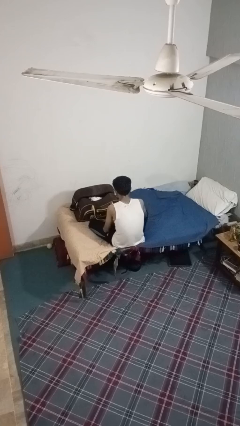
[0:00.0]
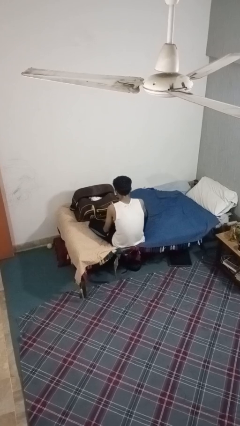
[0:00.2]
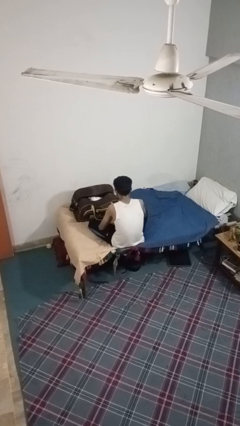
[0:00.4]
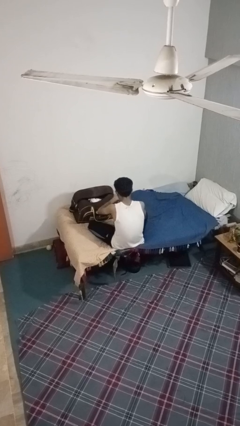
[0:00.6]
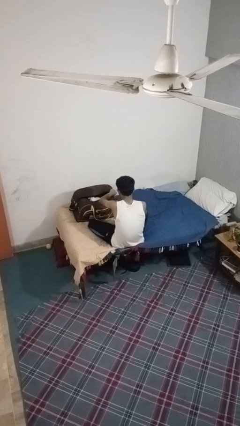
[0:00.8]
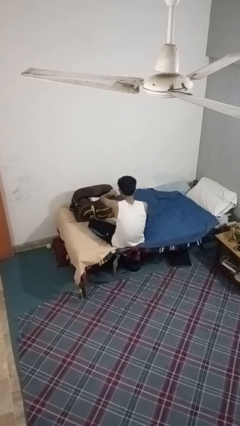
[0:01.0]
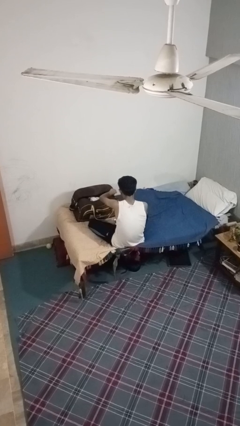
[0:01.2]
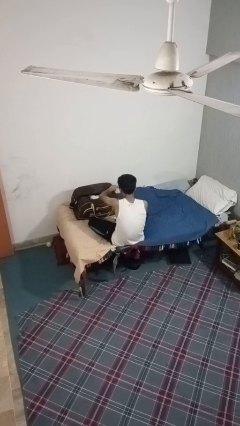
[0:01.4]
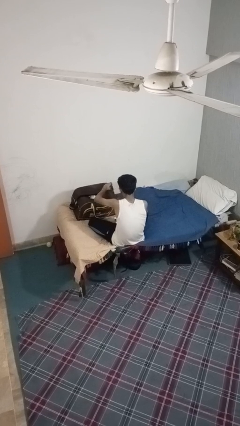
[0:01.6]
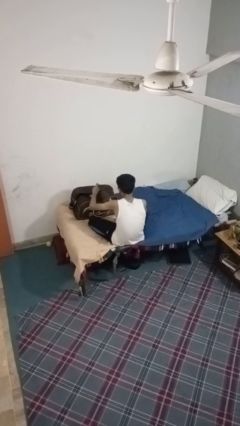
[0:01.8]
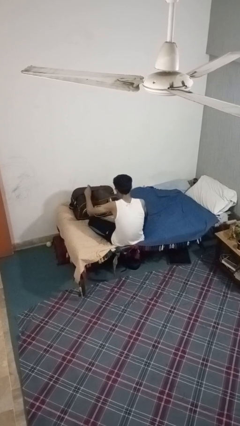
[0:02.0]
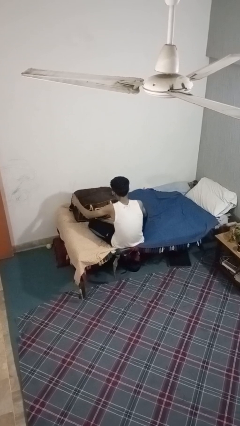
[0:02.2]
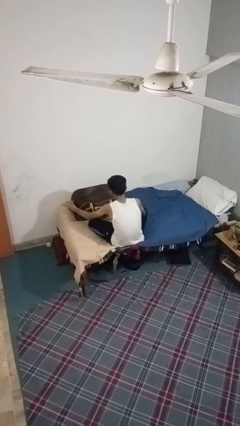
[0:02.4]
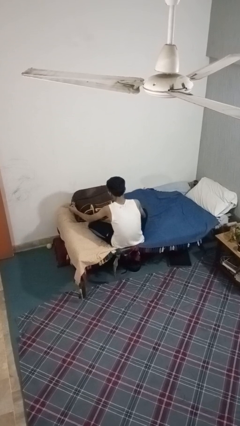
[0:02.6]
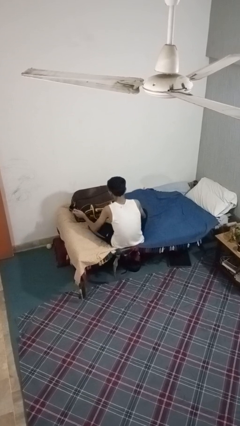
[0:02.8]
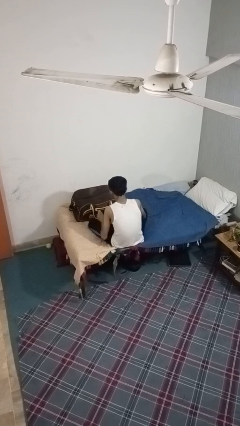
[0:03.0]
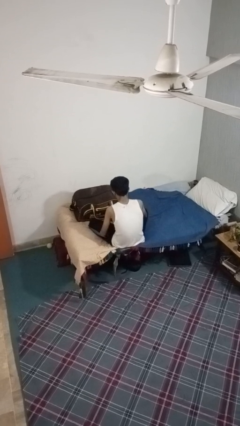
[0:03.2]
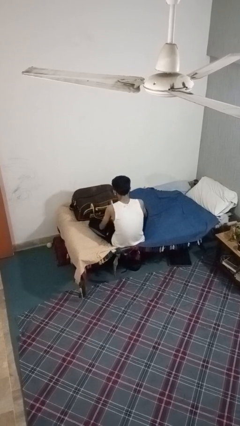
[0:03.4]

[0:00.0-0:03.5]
person closes suitcase

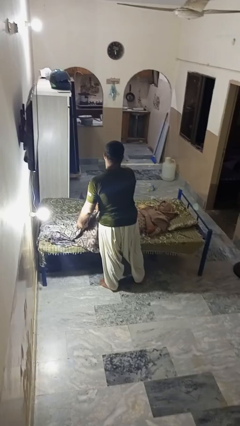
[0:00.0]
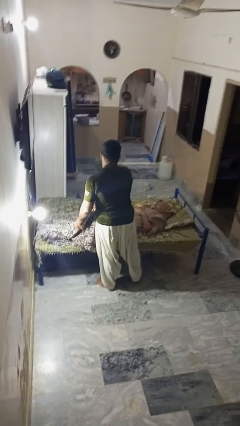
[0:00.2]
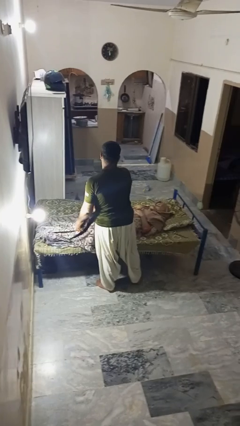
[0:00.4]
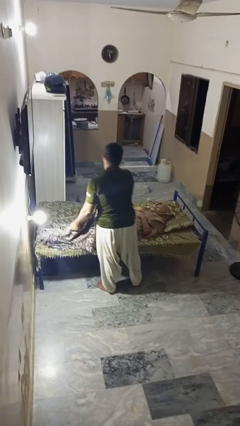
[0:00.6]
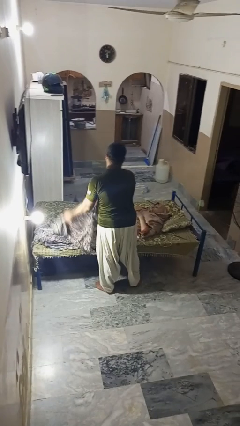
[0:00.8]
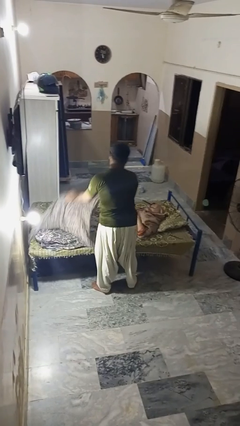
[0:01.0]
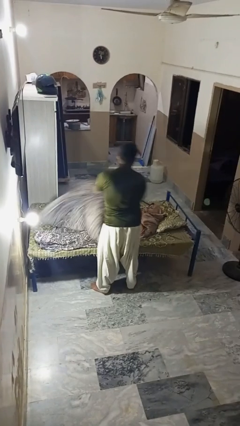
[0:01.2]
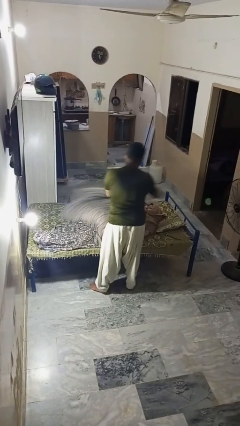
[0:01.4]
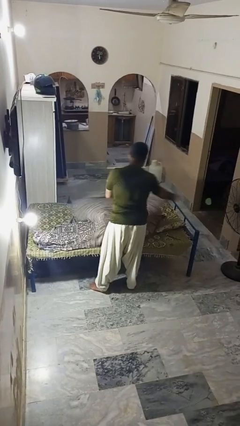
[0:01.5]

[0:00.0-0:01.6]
person covers friend with blanket

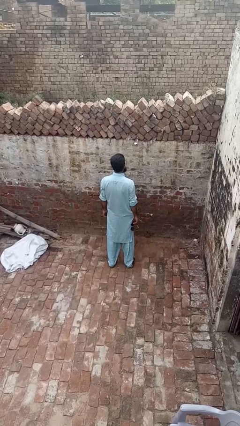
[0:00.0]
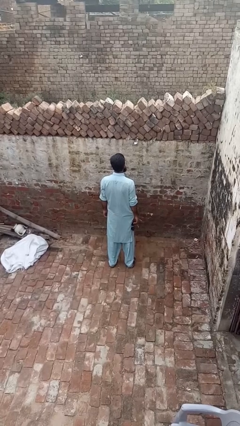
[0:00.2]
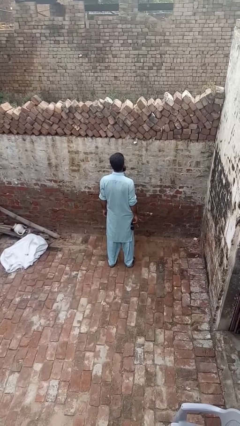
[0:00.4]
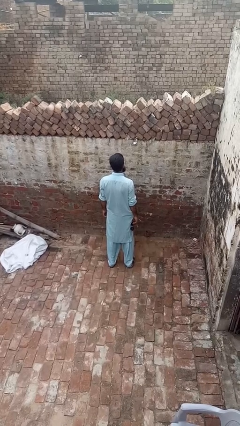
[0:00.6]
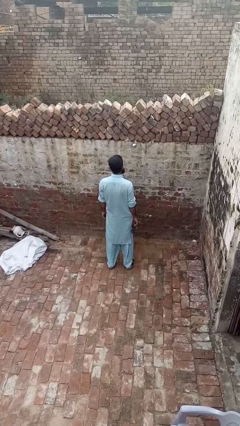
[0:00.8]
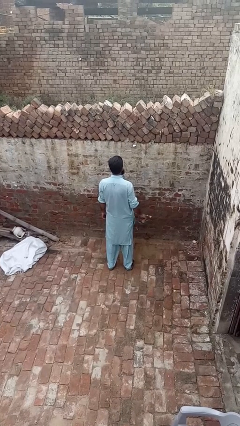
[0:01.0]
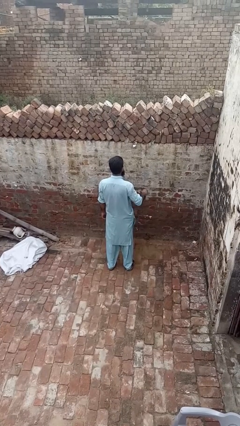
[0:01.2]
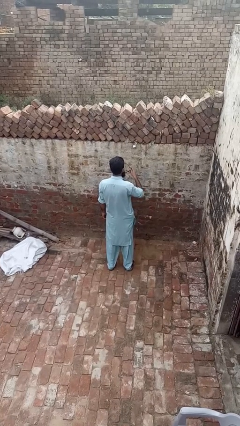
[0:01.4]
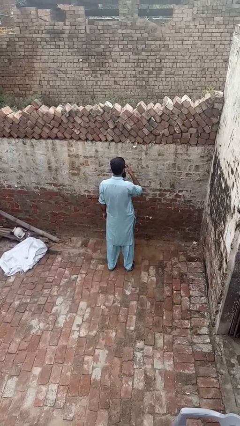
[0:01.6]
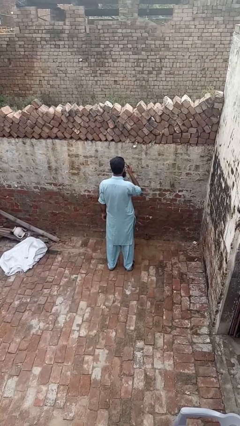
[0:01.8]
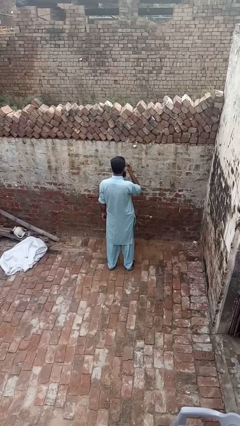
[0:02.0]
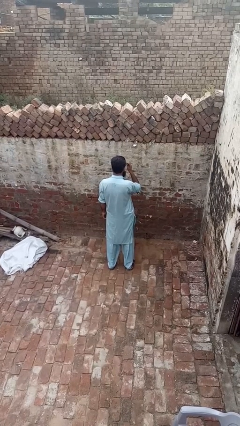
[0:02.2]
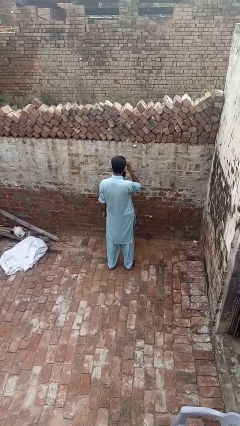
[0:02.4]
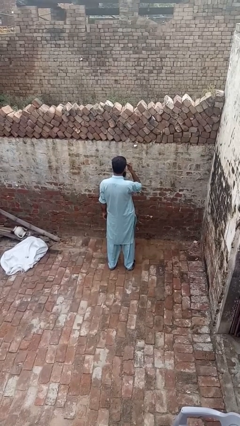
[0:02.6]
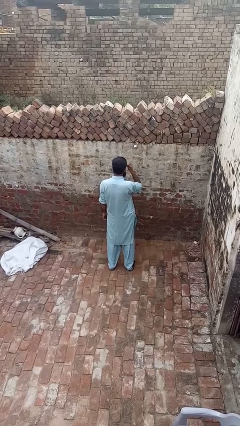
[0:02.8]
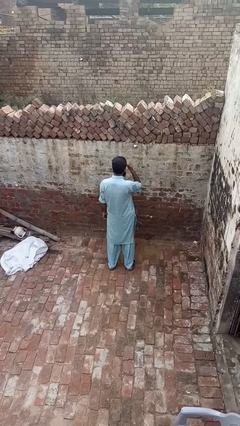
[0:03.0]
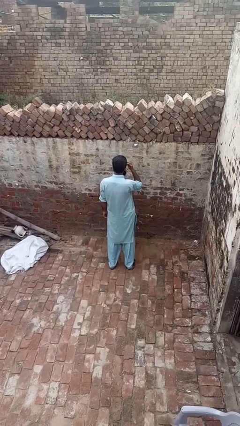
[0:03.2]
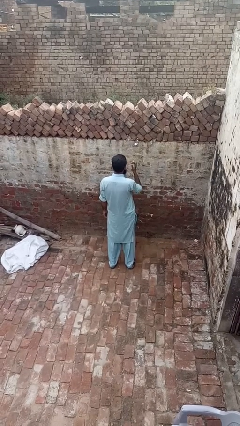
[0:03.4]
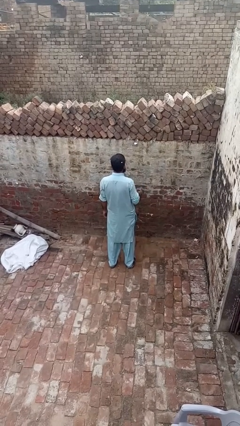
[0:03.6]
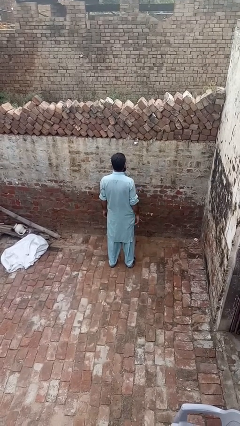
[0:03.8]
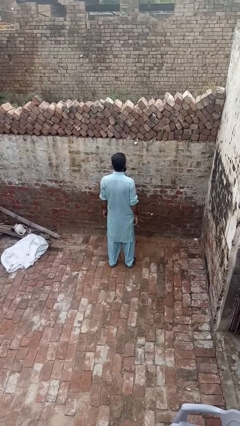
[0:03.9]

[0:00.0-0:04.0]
person puts on sunglasses

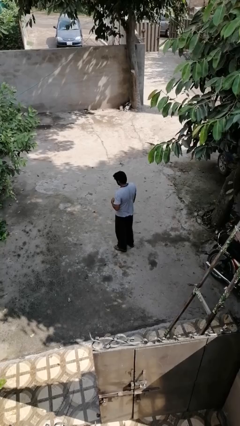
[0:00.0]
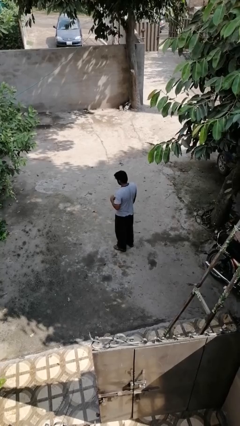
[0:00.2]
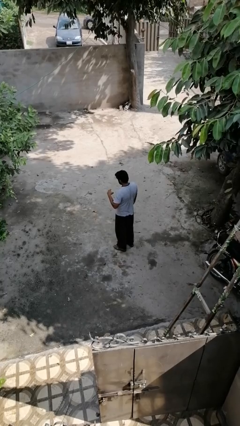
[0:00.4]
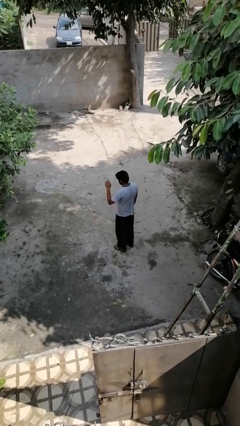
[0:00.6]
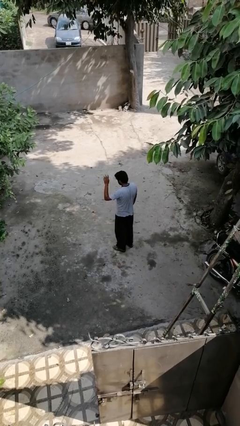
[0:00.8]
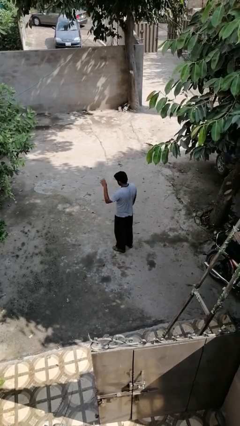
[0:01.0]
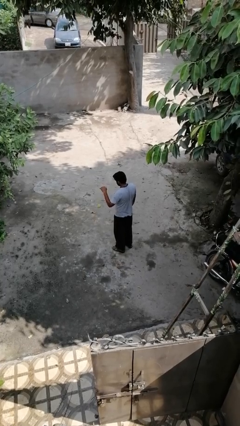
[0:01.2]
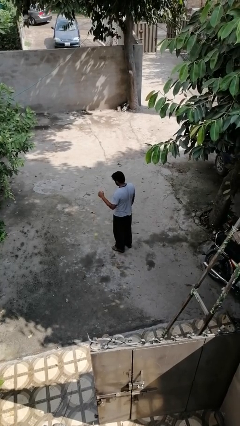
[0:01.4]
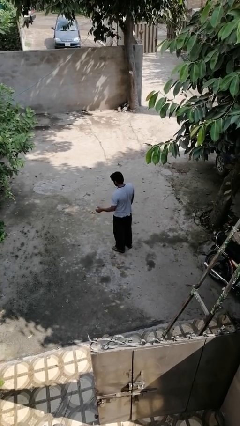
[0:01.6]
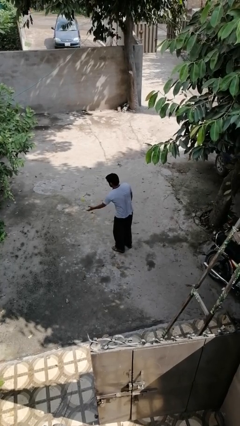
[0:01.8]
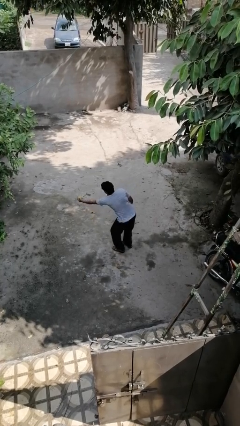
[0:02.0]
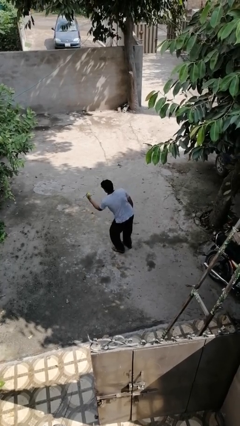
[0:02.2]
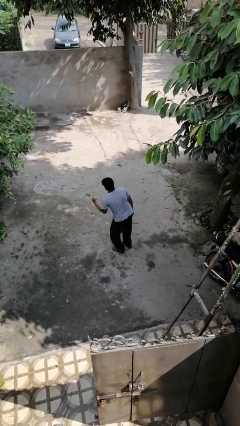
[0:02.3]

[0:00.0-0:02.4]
person bounces ball on floor

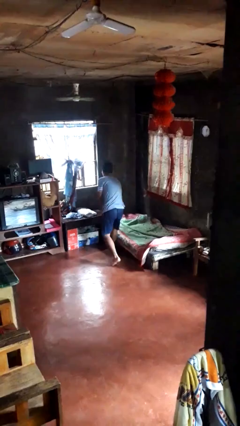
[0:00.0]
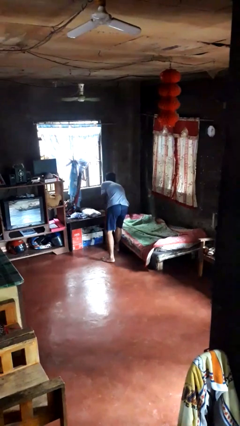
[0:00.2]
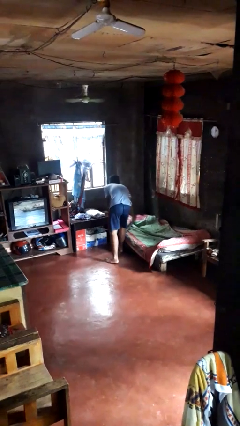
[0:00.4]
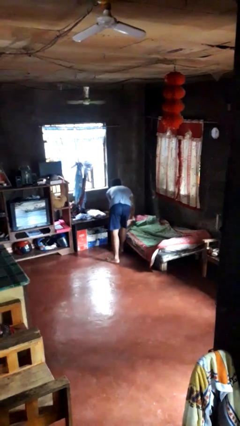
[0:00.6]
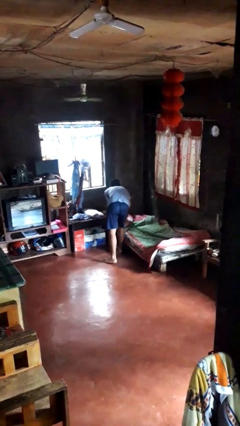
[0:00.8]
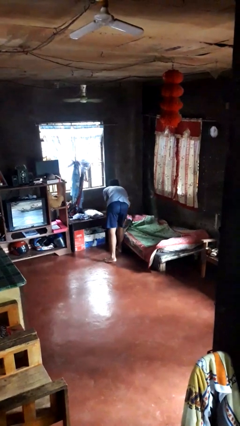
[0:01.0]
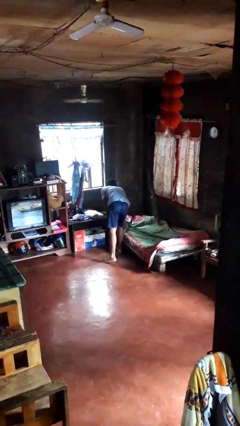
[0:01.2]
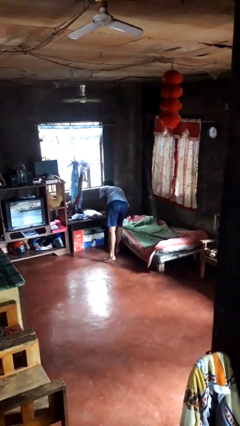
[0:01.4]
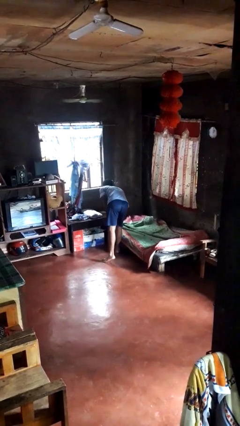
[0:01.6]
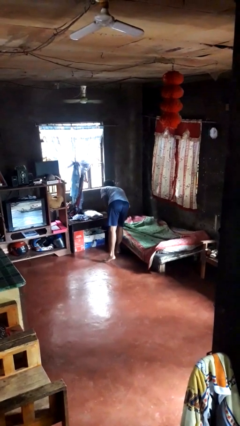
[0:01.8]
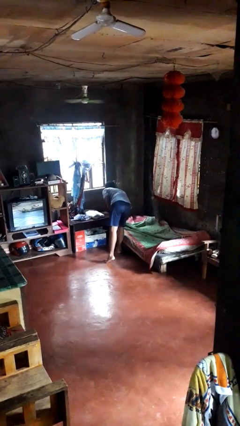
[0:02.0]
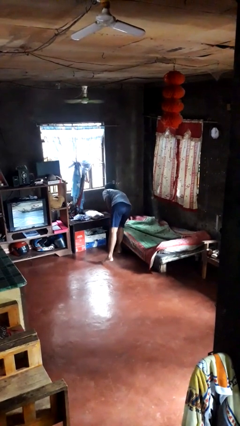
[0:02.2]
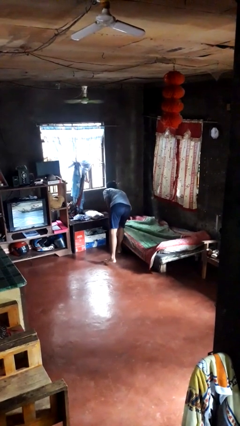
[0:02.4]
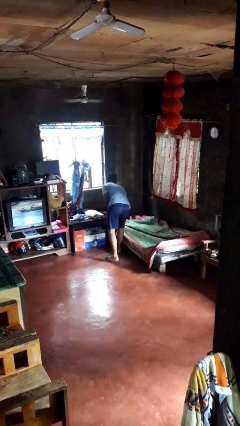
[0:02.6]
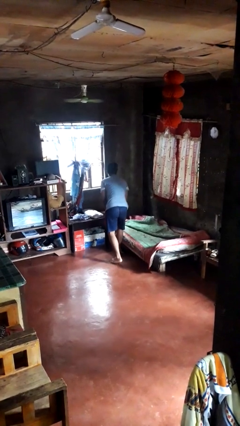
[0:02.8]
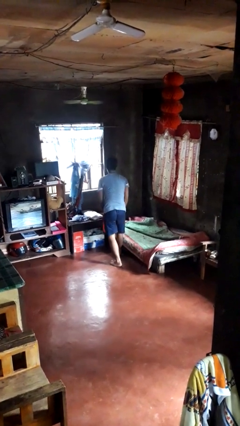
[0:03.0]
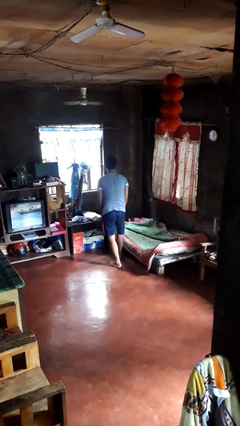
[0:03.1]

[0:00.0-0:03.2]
person makes bed

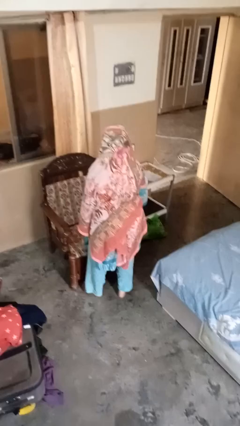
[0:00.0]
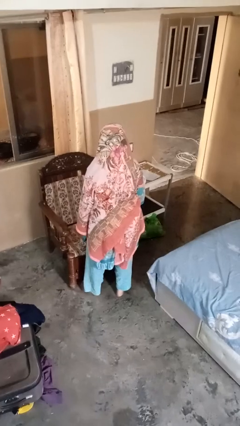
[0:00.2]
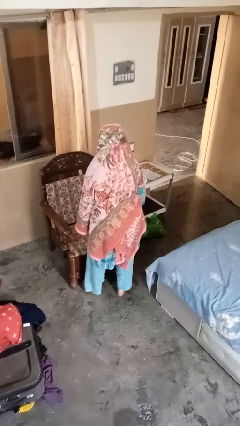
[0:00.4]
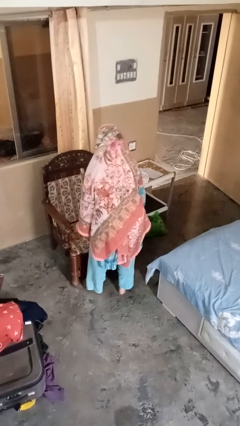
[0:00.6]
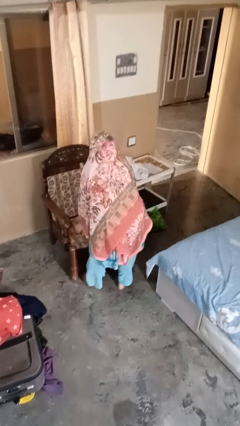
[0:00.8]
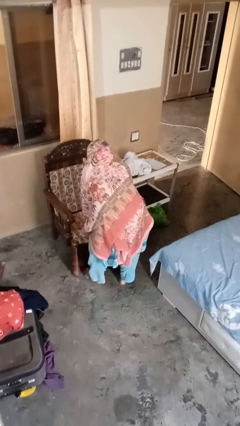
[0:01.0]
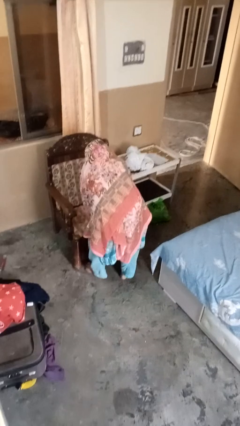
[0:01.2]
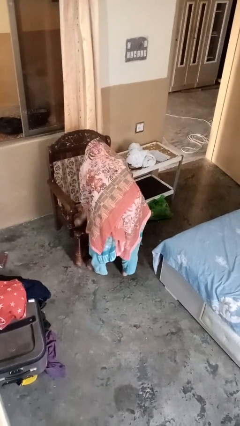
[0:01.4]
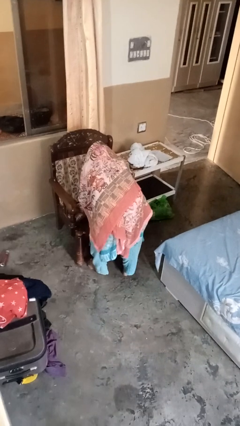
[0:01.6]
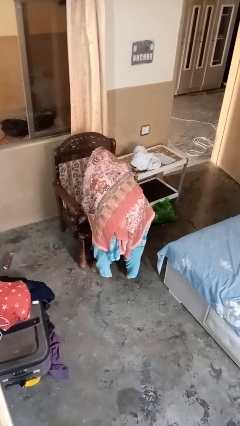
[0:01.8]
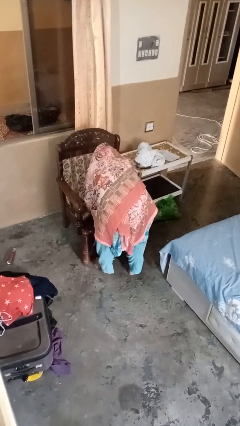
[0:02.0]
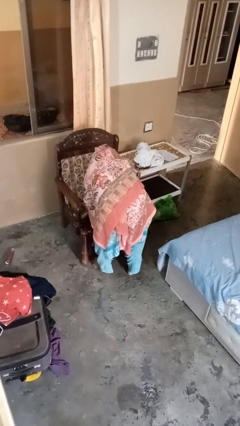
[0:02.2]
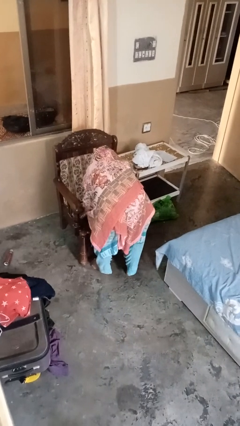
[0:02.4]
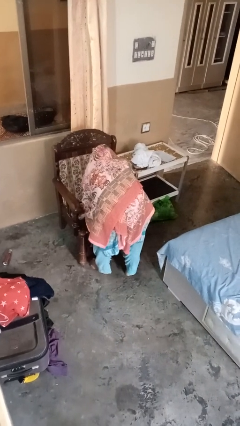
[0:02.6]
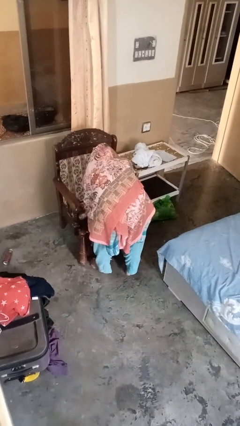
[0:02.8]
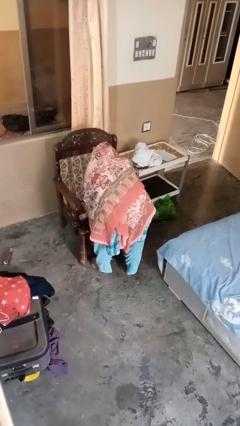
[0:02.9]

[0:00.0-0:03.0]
person searches under couch
